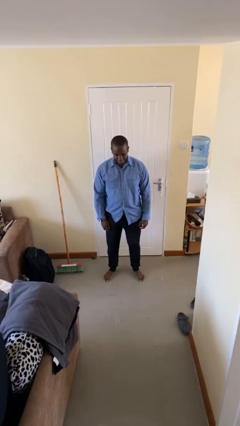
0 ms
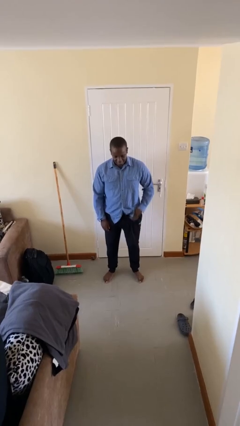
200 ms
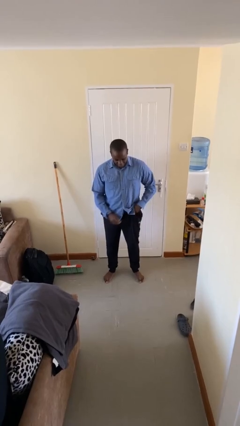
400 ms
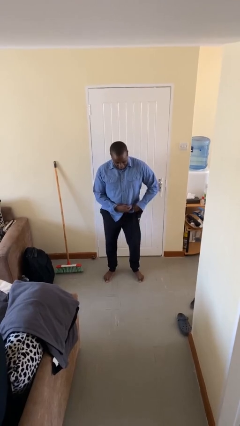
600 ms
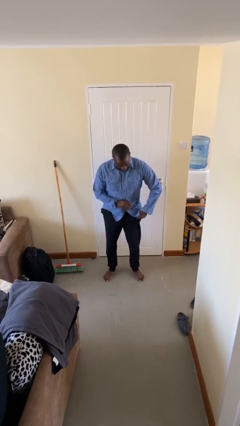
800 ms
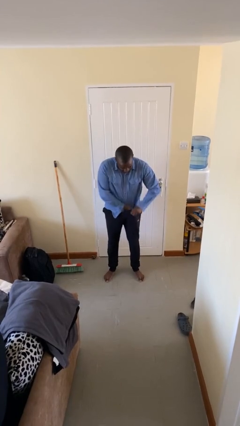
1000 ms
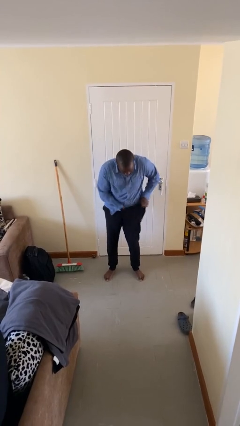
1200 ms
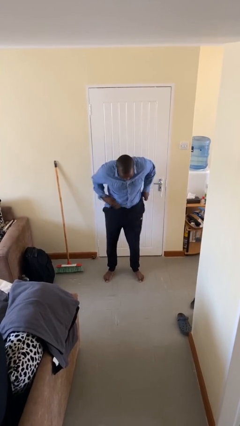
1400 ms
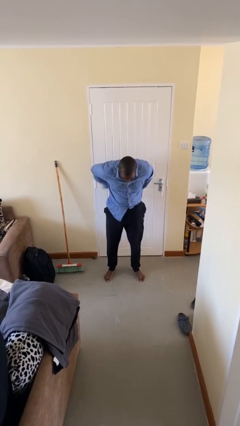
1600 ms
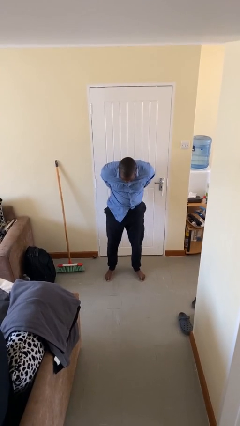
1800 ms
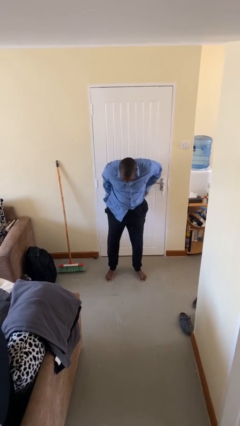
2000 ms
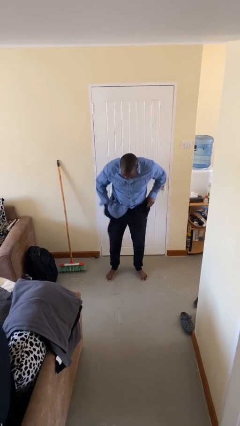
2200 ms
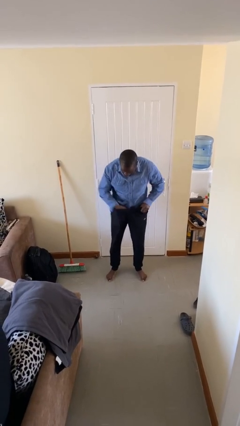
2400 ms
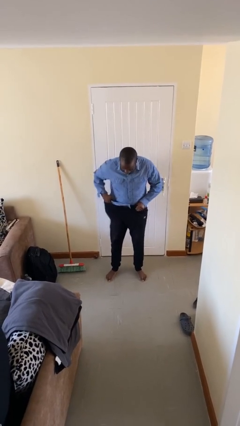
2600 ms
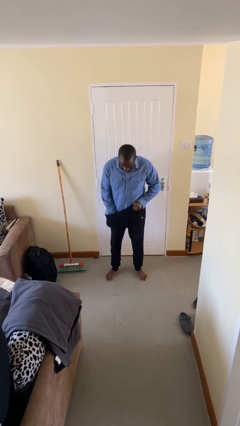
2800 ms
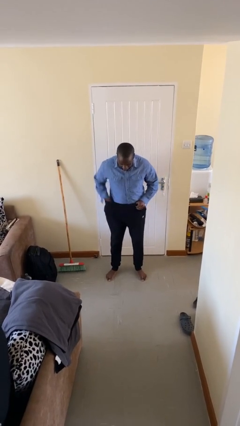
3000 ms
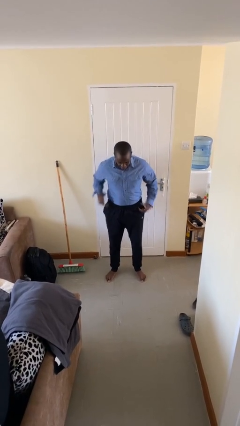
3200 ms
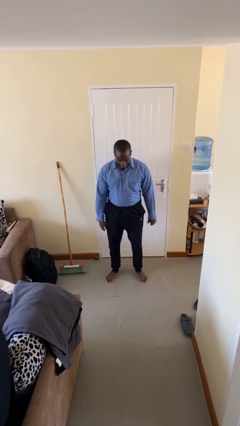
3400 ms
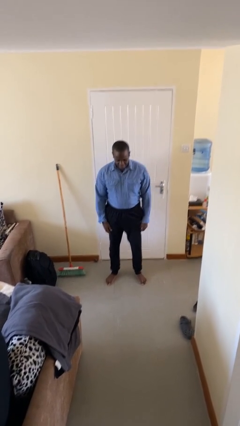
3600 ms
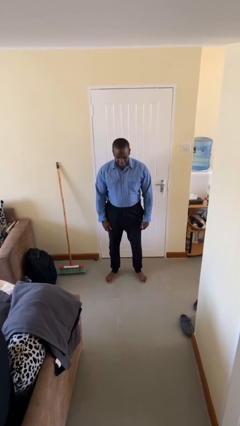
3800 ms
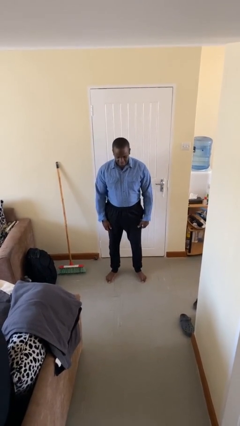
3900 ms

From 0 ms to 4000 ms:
person tucks in shirt

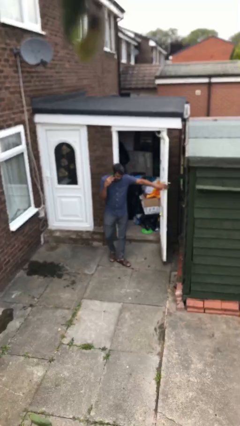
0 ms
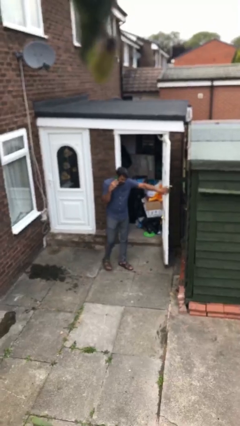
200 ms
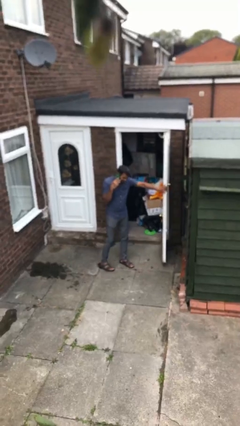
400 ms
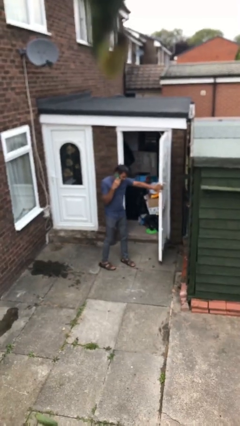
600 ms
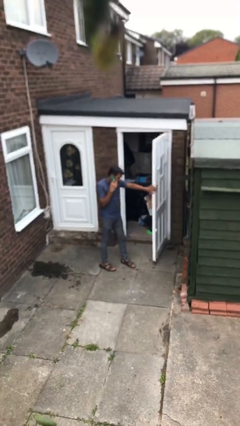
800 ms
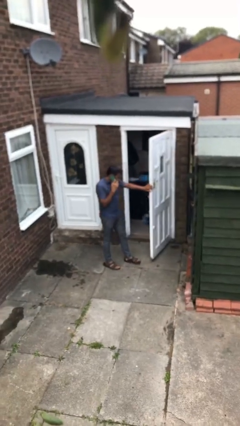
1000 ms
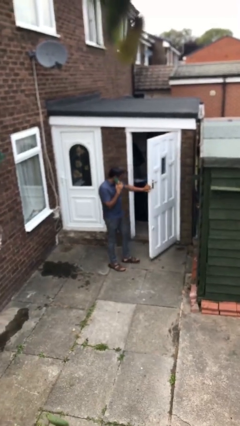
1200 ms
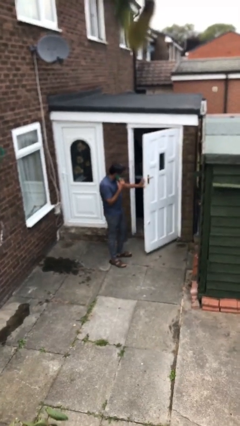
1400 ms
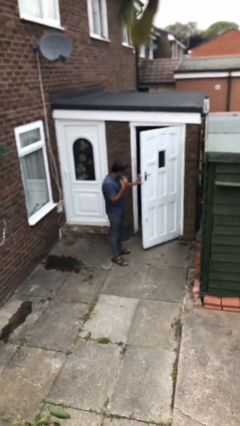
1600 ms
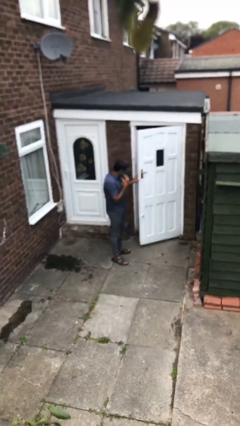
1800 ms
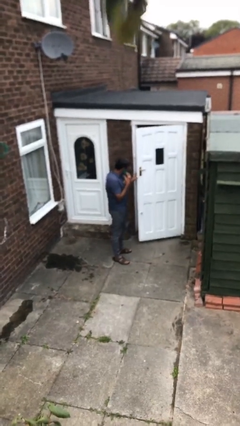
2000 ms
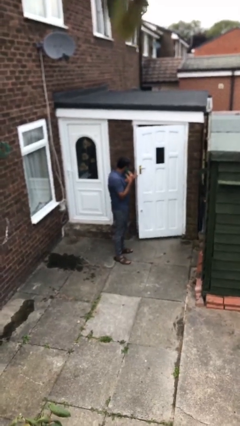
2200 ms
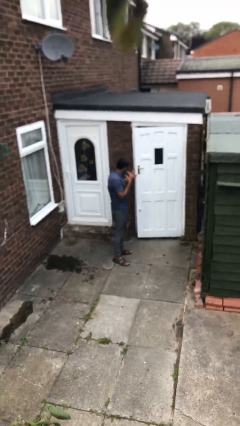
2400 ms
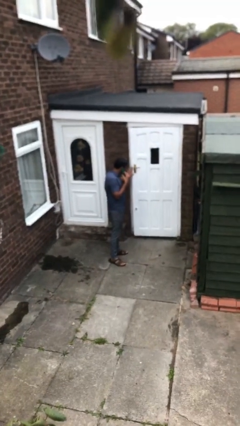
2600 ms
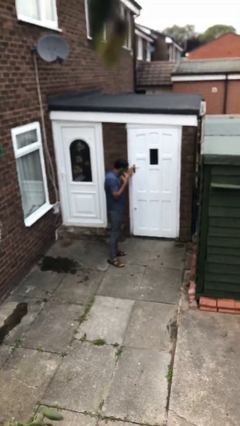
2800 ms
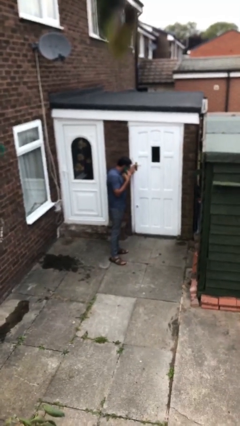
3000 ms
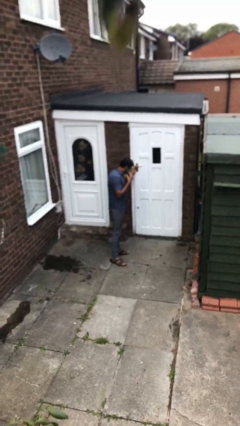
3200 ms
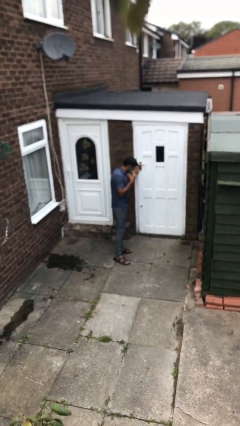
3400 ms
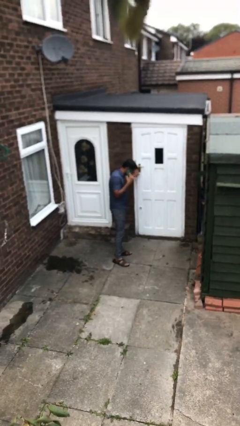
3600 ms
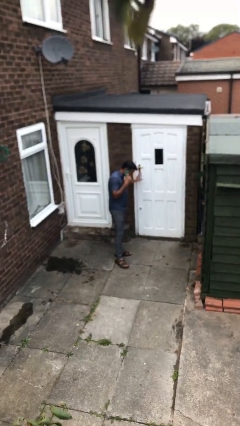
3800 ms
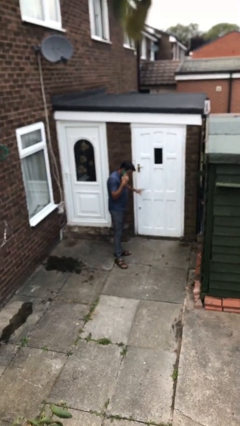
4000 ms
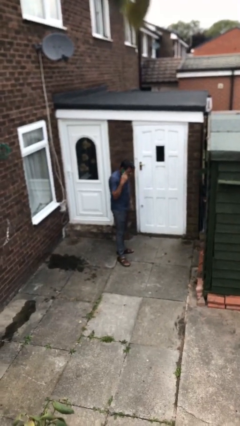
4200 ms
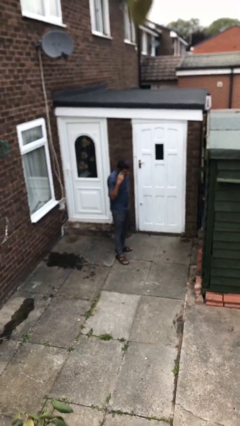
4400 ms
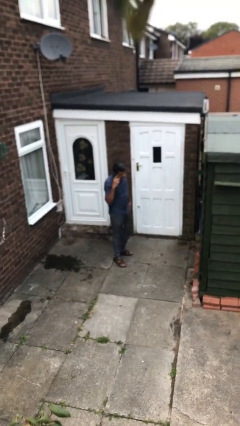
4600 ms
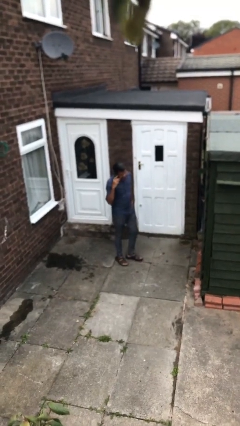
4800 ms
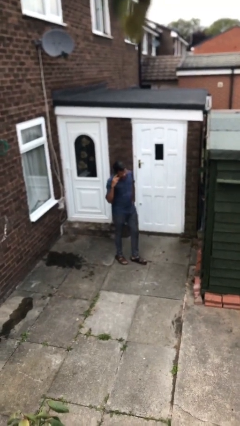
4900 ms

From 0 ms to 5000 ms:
person closes facility door

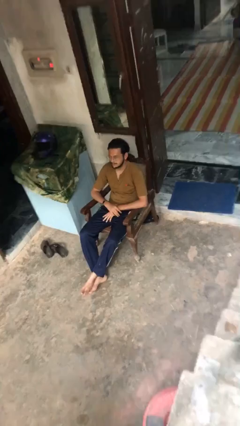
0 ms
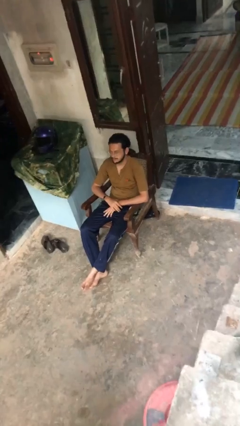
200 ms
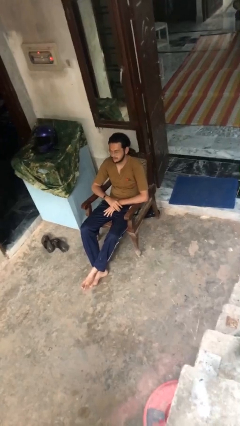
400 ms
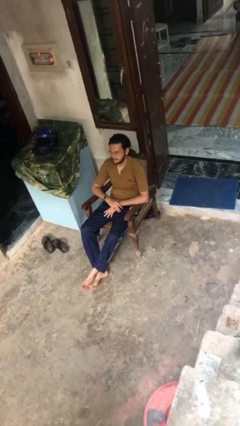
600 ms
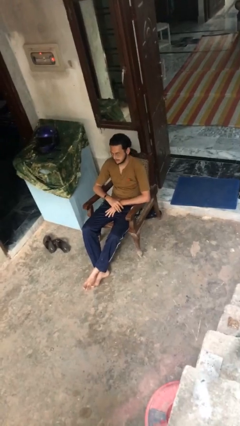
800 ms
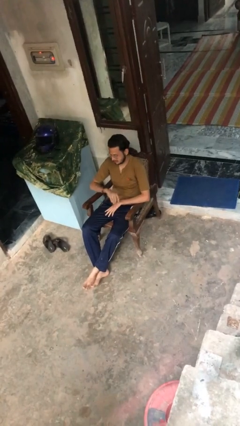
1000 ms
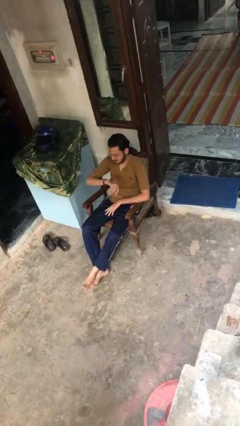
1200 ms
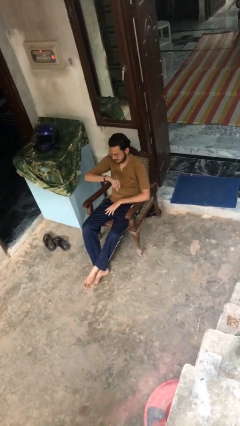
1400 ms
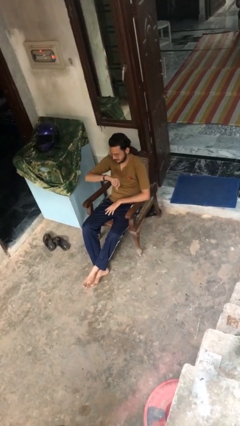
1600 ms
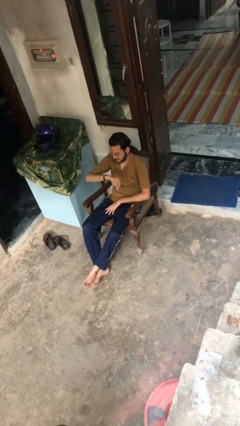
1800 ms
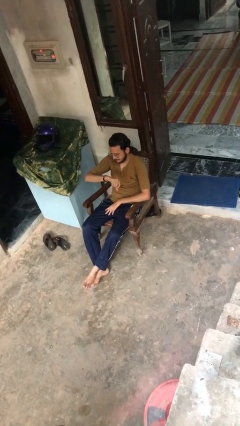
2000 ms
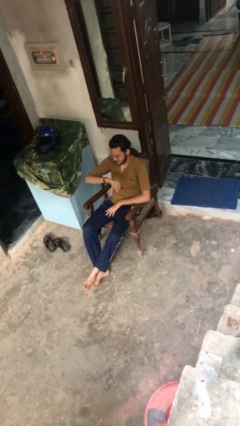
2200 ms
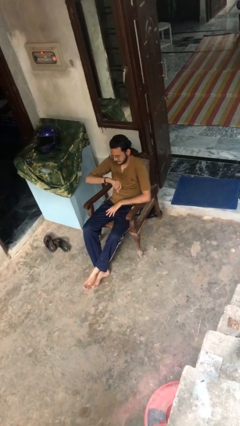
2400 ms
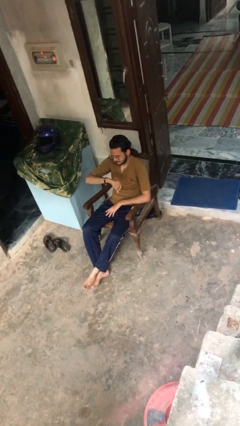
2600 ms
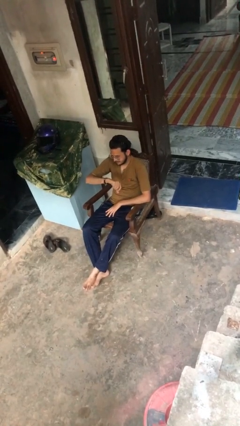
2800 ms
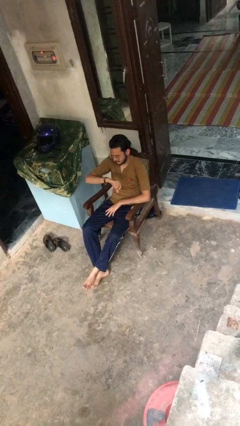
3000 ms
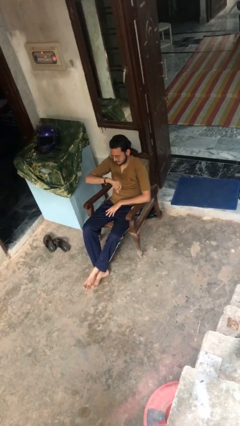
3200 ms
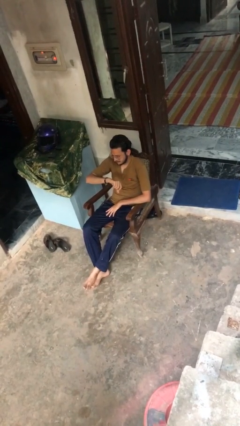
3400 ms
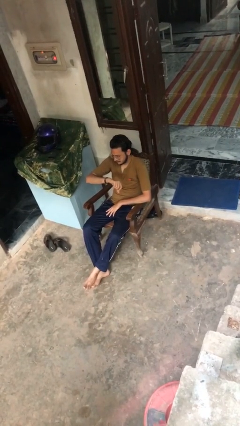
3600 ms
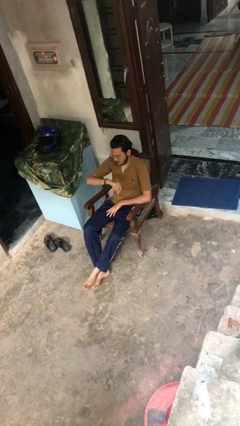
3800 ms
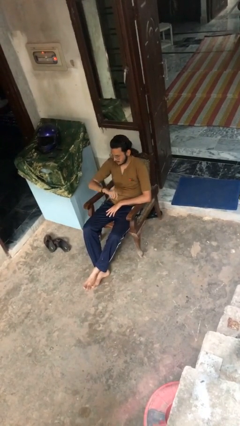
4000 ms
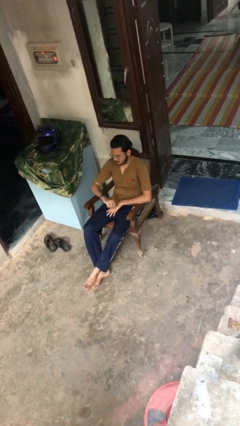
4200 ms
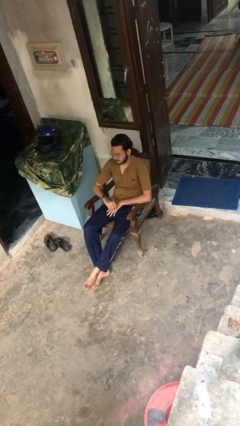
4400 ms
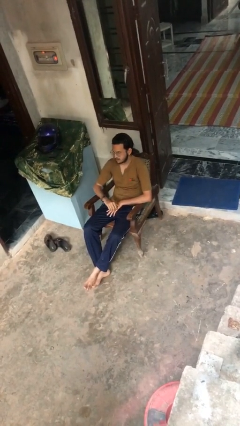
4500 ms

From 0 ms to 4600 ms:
person looks at wristwatch

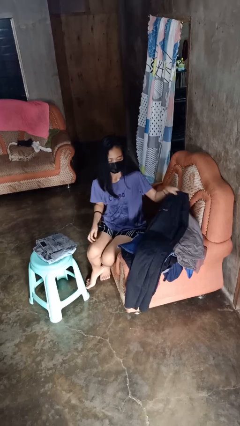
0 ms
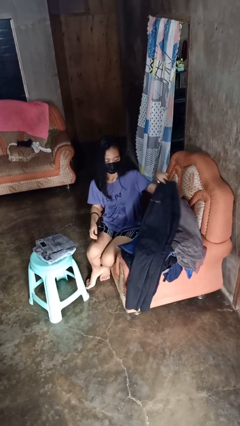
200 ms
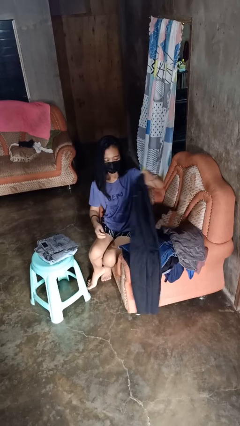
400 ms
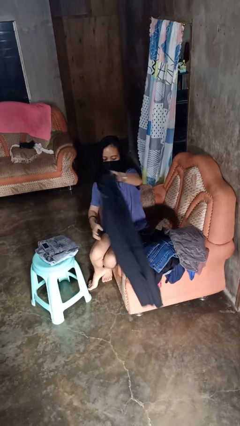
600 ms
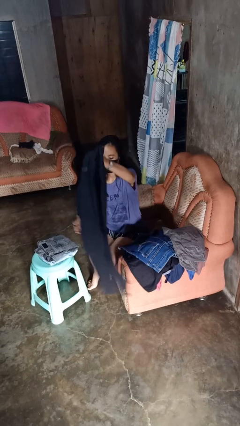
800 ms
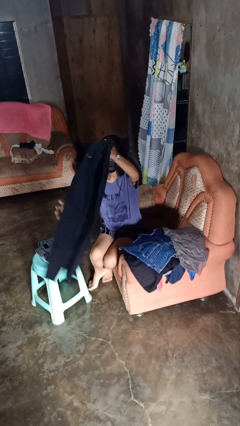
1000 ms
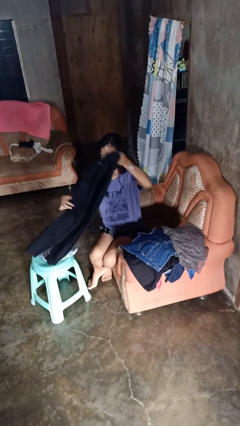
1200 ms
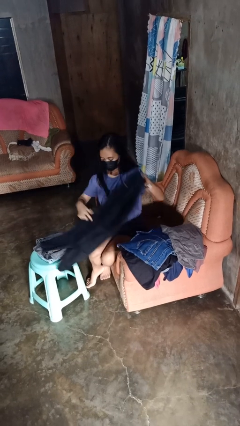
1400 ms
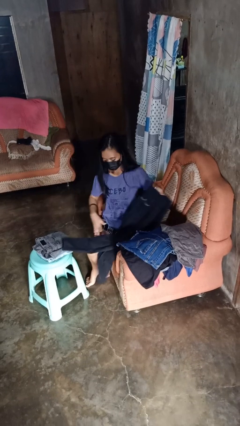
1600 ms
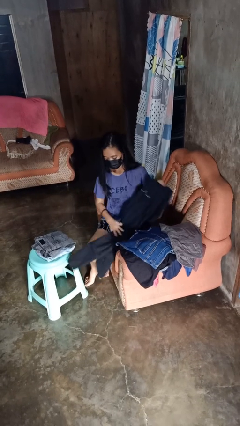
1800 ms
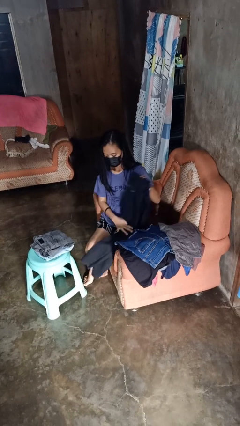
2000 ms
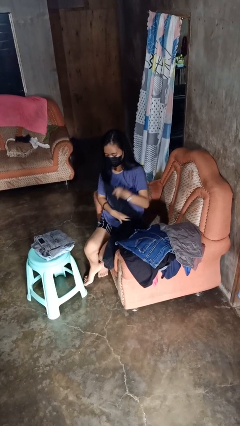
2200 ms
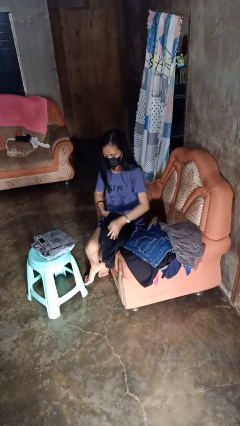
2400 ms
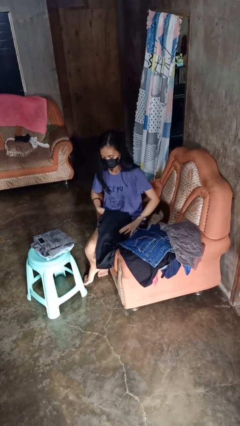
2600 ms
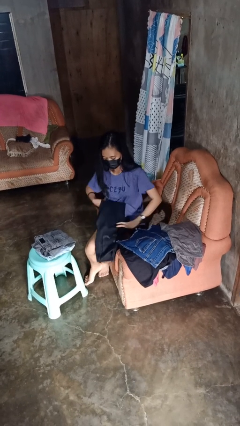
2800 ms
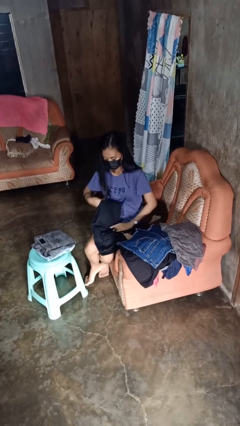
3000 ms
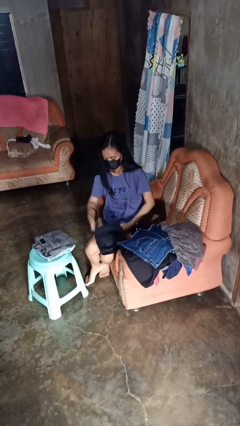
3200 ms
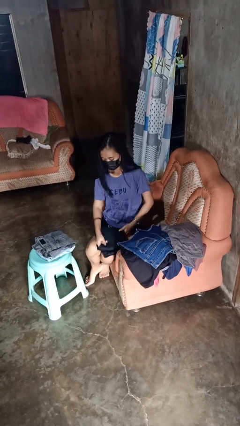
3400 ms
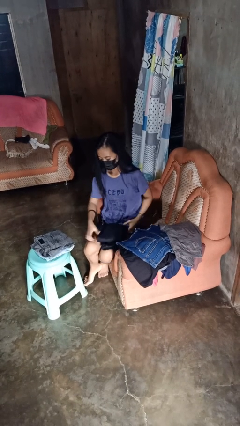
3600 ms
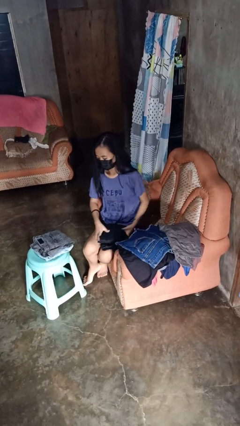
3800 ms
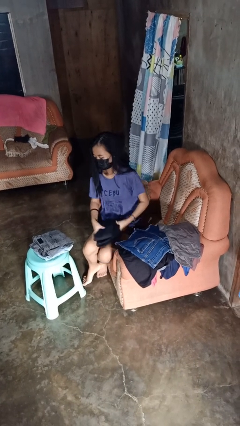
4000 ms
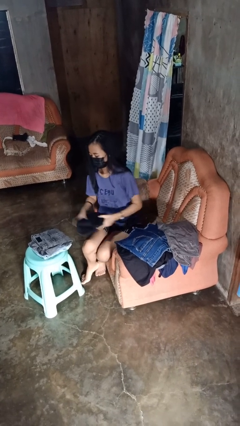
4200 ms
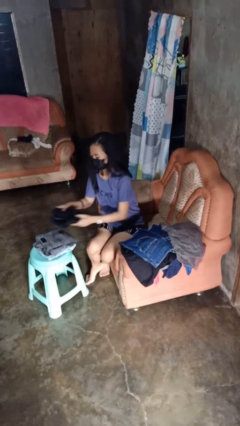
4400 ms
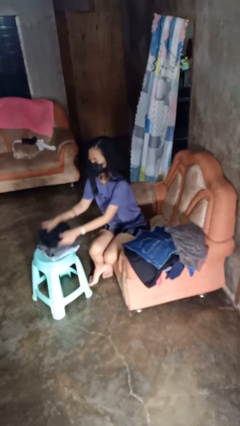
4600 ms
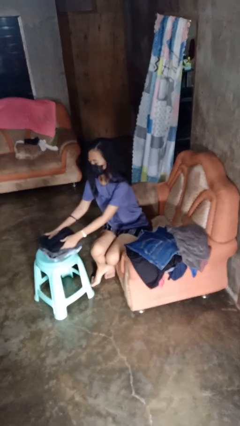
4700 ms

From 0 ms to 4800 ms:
person folds pants
